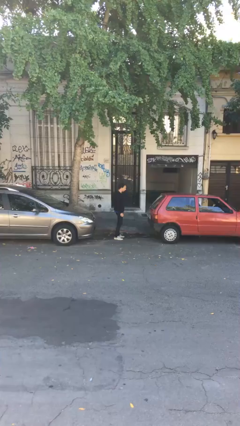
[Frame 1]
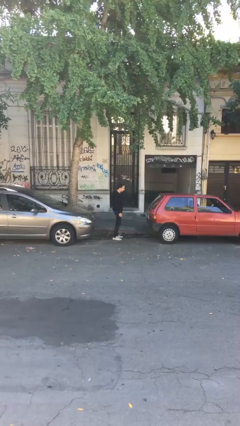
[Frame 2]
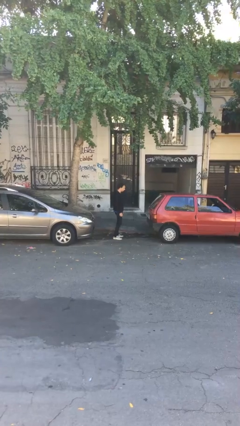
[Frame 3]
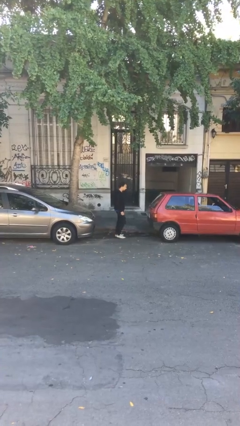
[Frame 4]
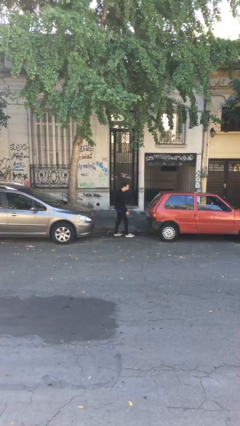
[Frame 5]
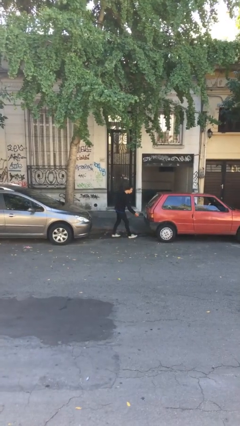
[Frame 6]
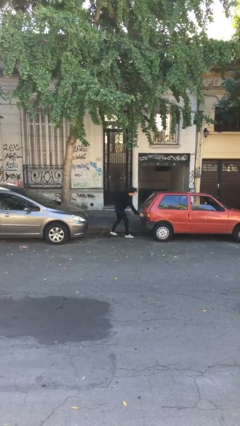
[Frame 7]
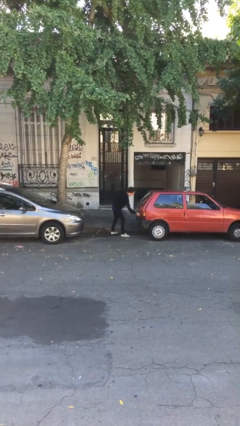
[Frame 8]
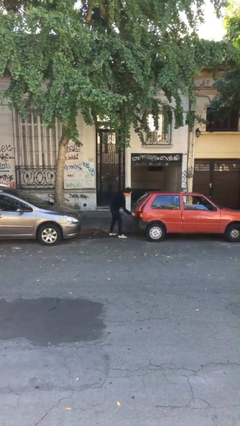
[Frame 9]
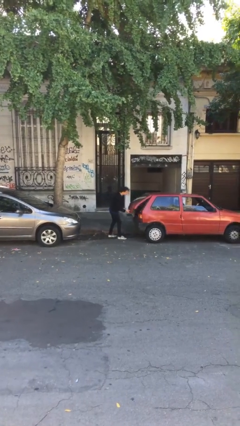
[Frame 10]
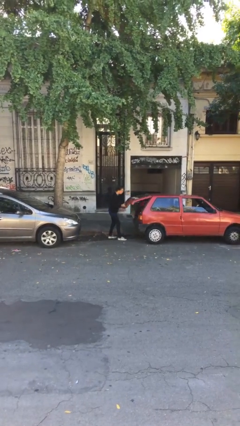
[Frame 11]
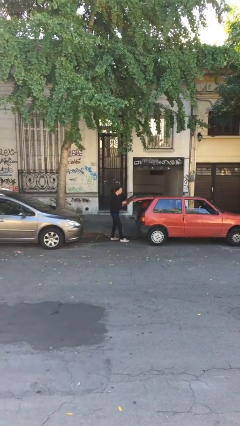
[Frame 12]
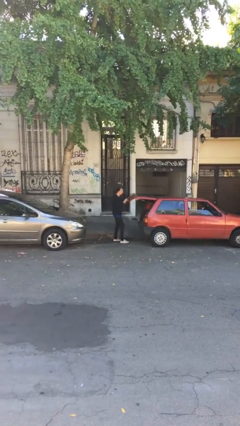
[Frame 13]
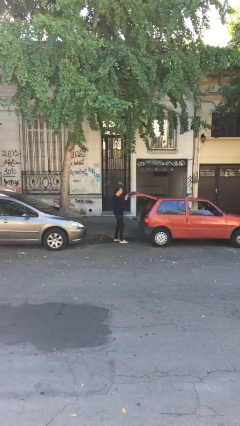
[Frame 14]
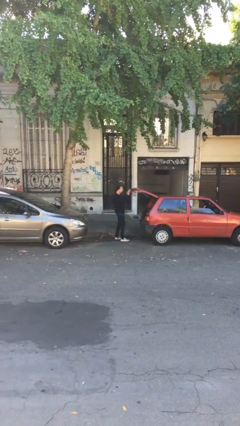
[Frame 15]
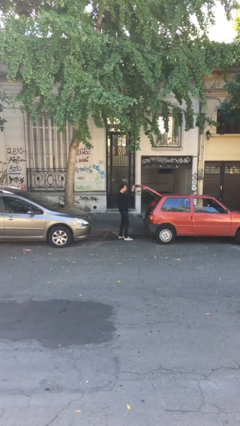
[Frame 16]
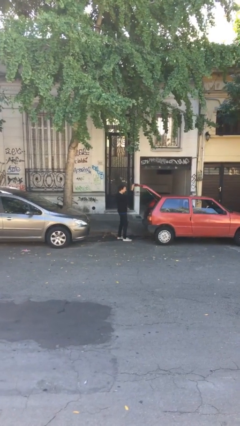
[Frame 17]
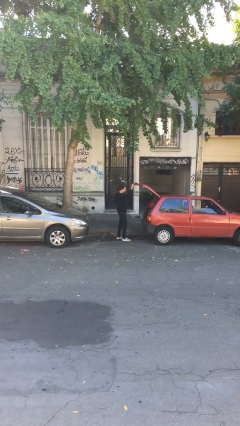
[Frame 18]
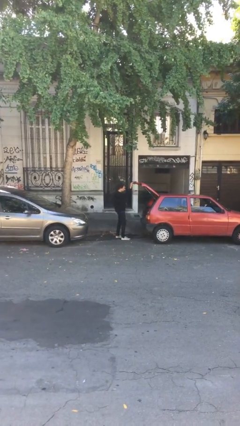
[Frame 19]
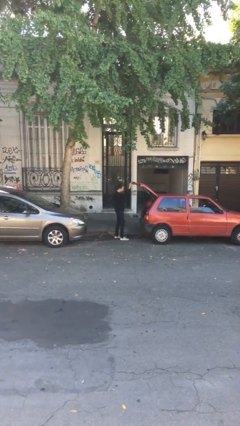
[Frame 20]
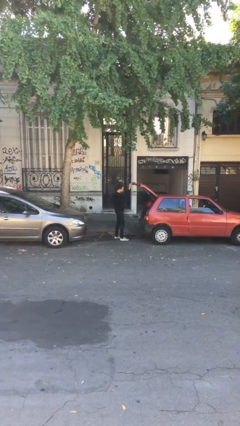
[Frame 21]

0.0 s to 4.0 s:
person opens car trunk

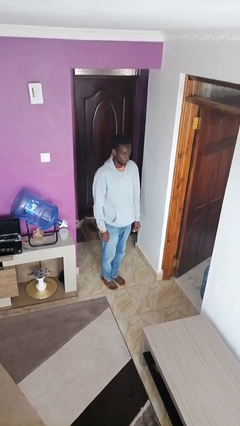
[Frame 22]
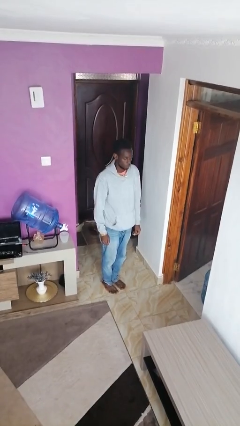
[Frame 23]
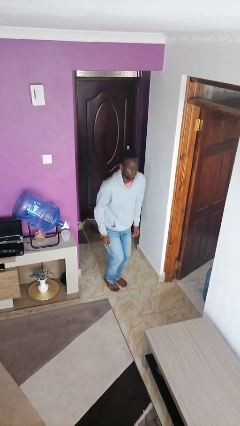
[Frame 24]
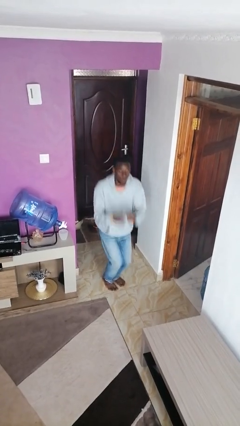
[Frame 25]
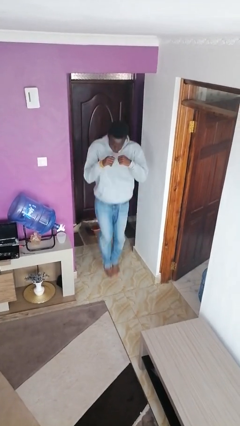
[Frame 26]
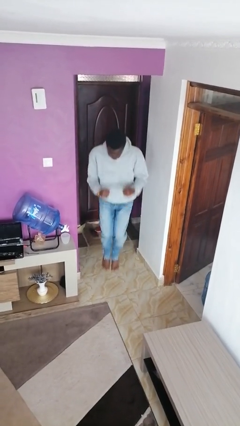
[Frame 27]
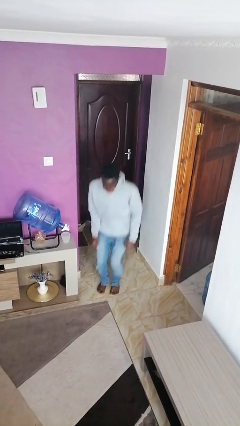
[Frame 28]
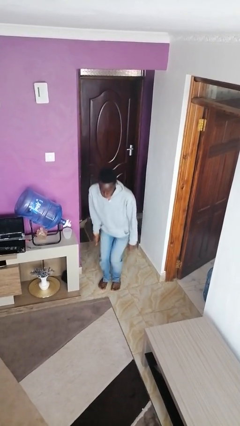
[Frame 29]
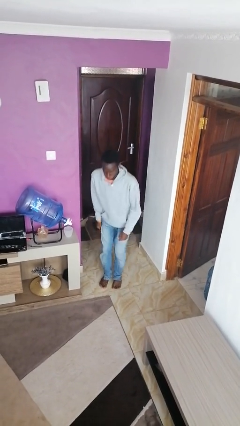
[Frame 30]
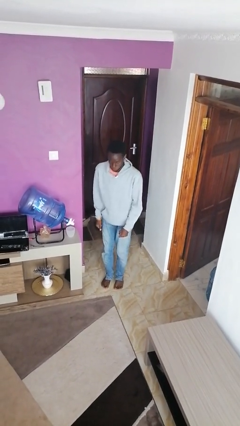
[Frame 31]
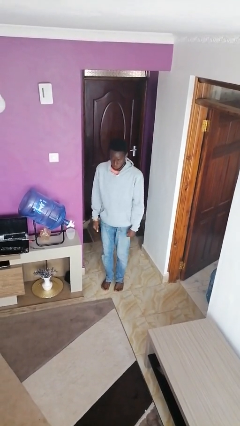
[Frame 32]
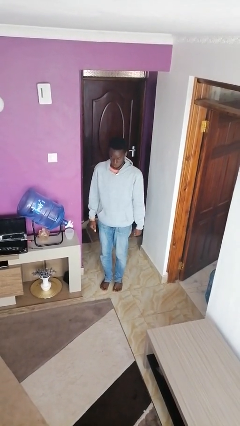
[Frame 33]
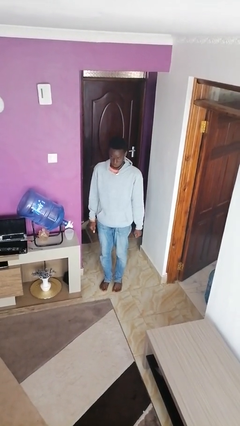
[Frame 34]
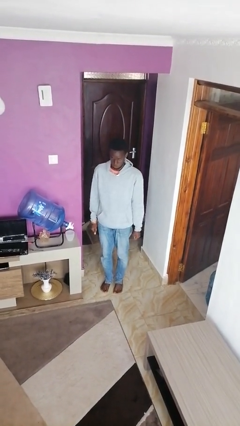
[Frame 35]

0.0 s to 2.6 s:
person jumps

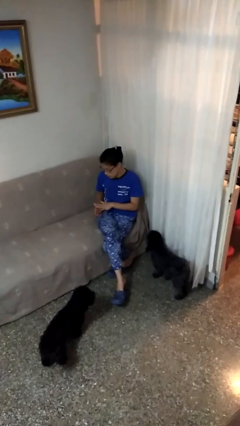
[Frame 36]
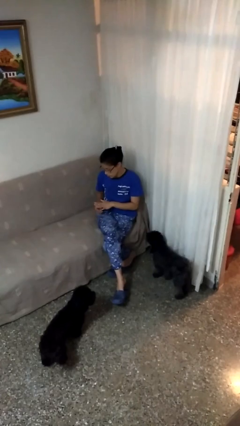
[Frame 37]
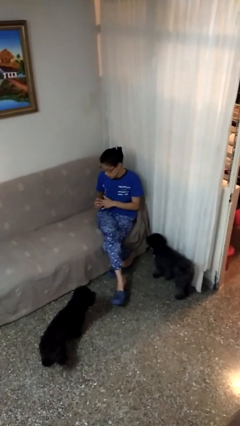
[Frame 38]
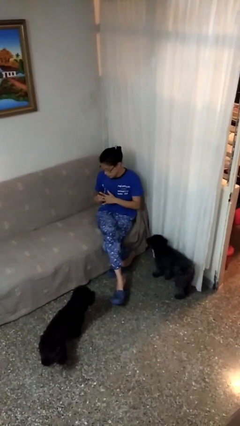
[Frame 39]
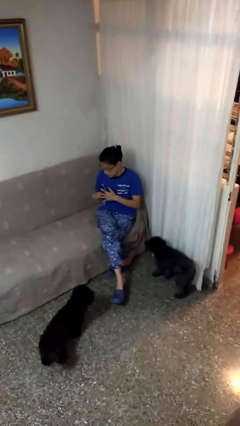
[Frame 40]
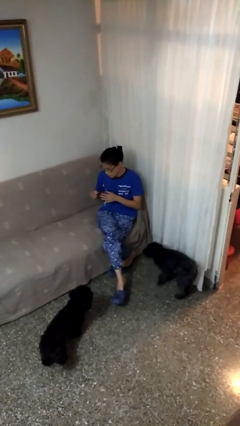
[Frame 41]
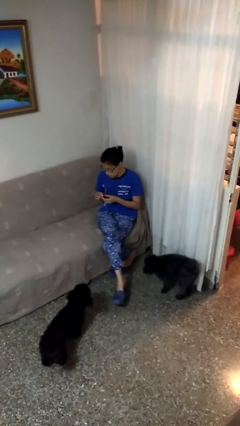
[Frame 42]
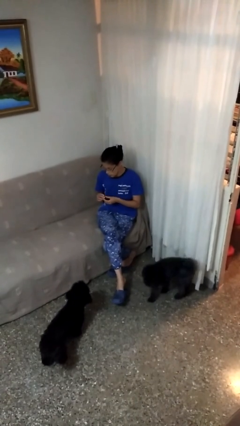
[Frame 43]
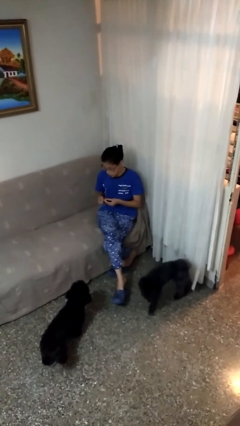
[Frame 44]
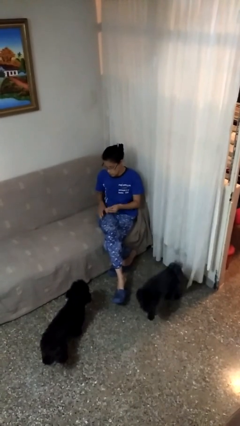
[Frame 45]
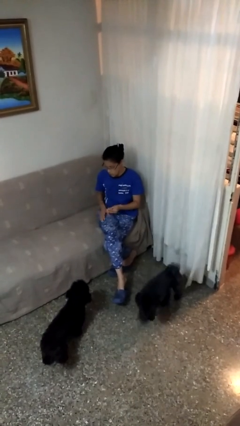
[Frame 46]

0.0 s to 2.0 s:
person takes off ring

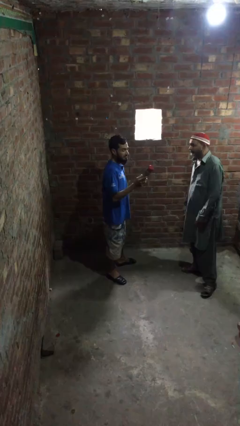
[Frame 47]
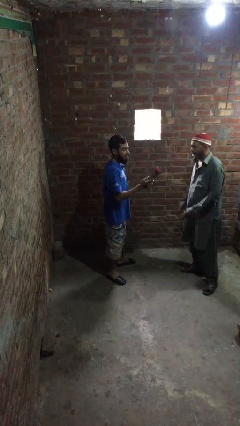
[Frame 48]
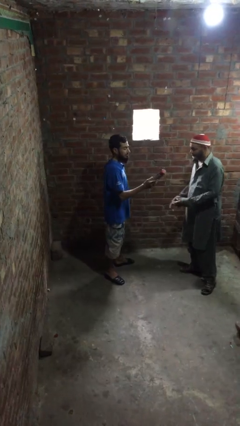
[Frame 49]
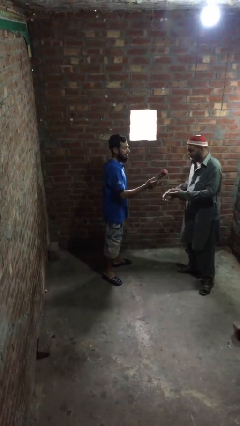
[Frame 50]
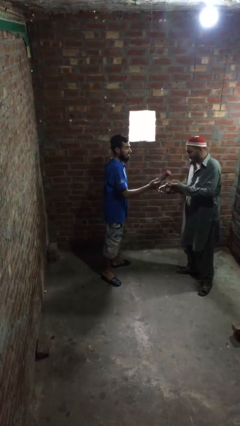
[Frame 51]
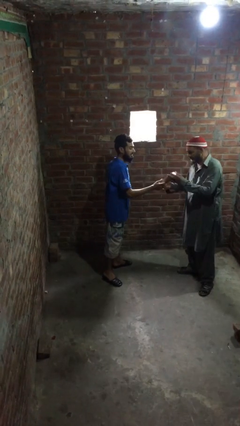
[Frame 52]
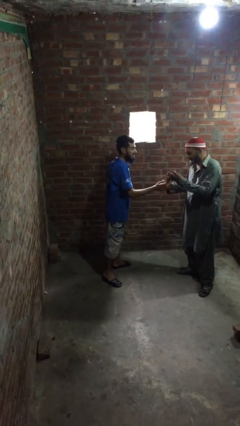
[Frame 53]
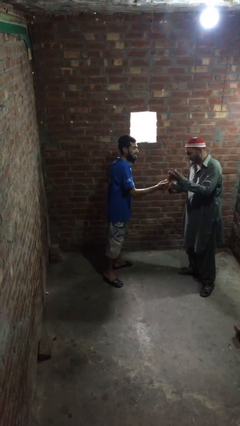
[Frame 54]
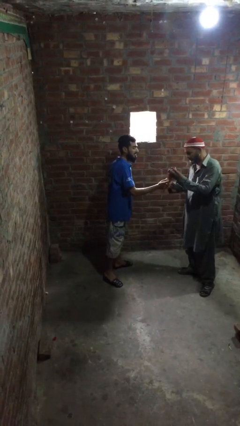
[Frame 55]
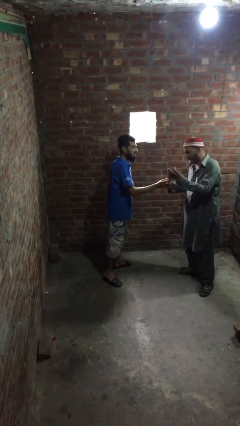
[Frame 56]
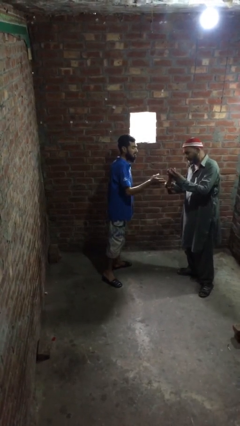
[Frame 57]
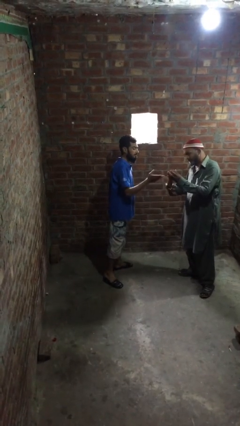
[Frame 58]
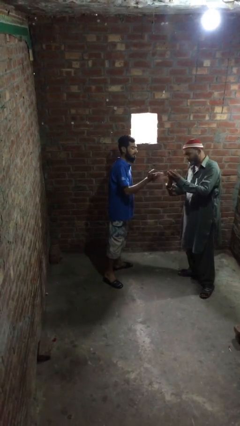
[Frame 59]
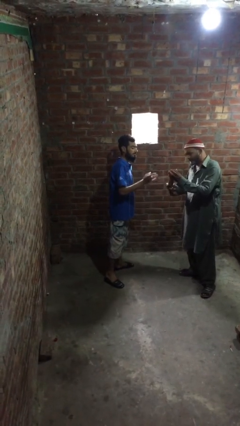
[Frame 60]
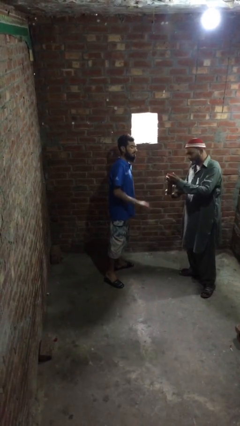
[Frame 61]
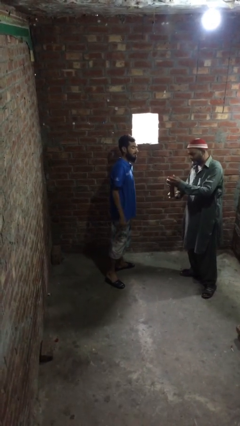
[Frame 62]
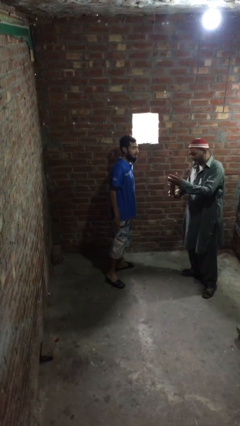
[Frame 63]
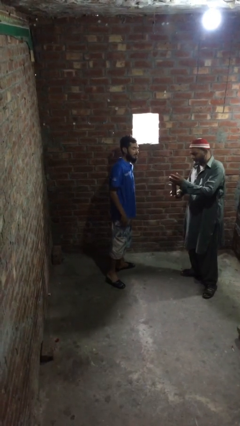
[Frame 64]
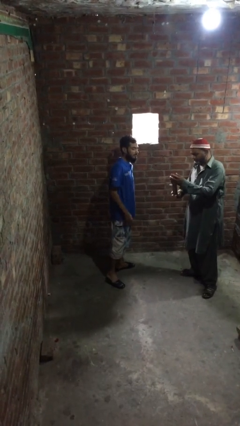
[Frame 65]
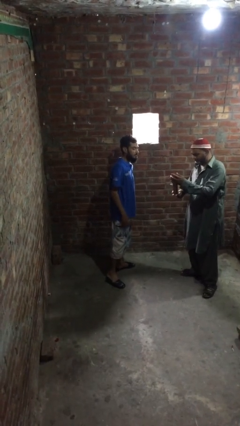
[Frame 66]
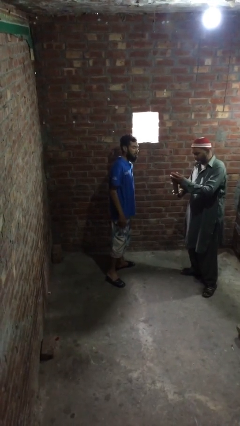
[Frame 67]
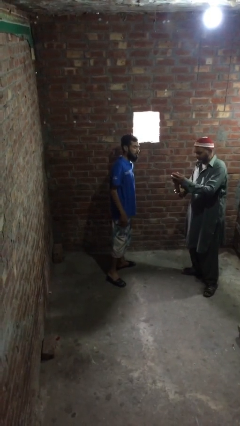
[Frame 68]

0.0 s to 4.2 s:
person transfers object to person

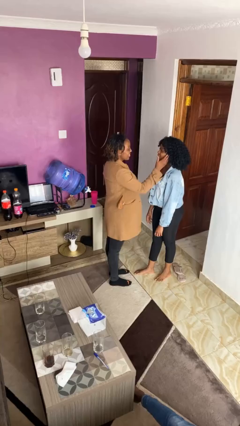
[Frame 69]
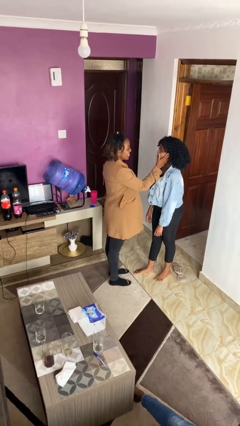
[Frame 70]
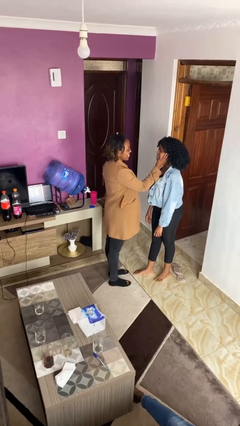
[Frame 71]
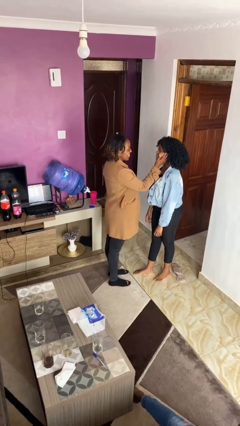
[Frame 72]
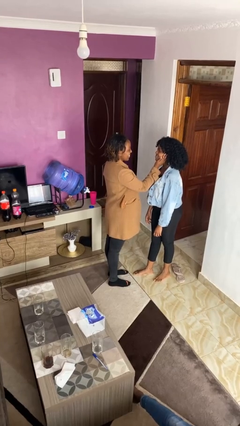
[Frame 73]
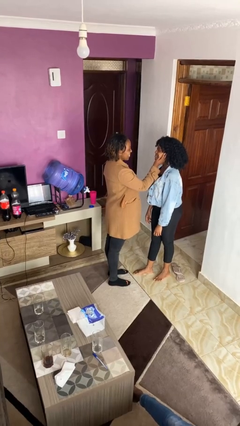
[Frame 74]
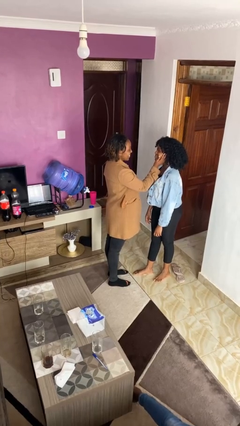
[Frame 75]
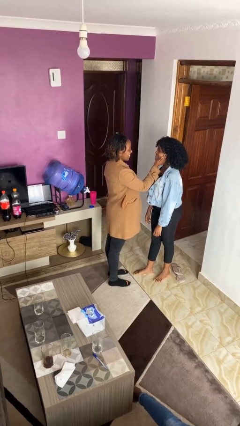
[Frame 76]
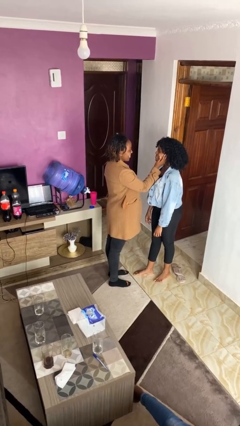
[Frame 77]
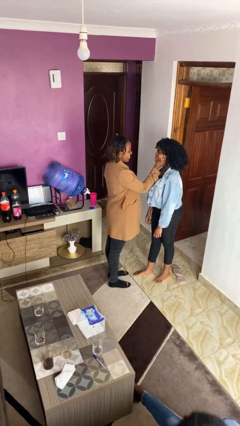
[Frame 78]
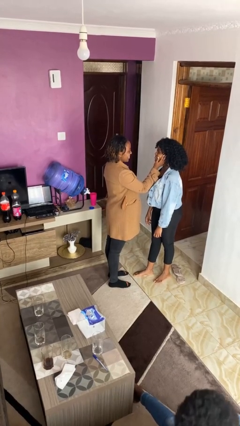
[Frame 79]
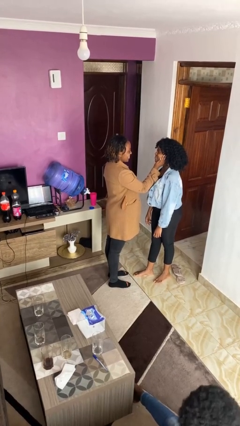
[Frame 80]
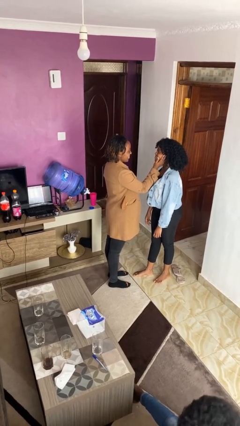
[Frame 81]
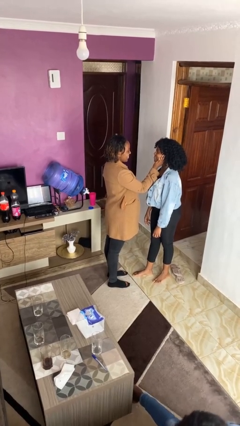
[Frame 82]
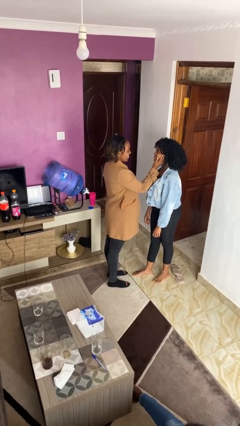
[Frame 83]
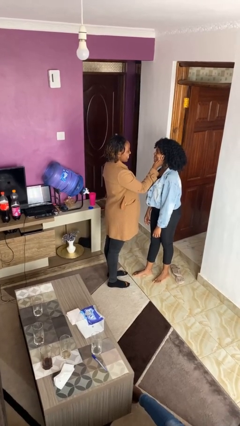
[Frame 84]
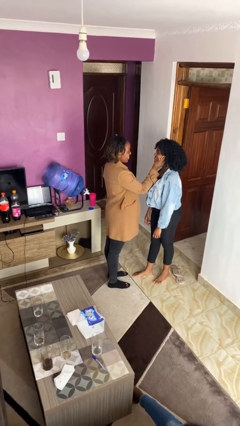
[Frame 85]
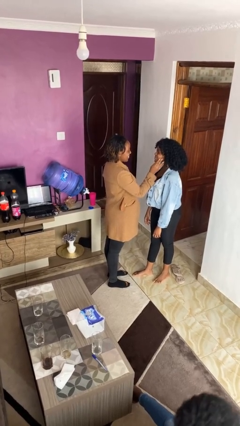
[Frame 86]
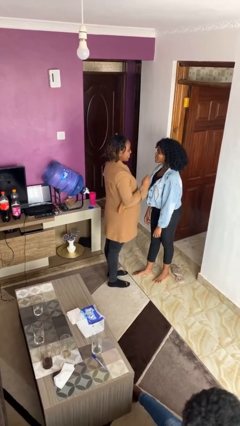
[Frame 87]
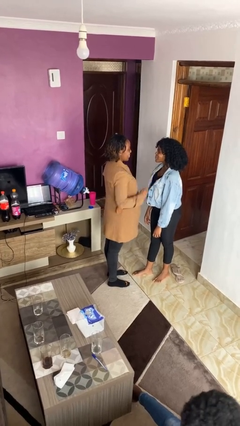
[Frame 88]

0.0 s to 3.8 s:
person touches face of person

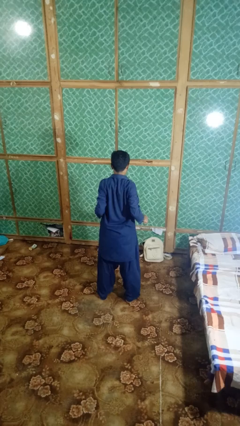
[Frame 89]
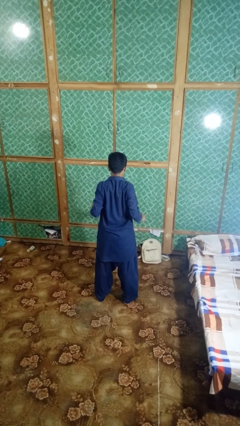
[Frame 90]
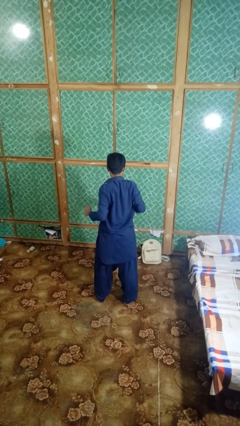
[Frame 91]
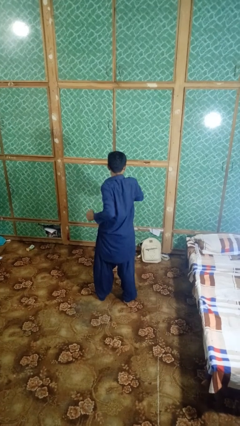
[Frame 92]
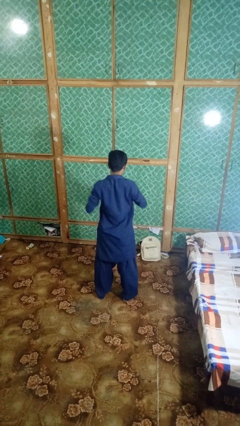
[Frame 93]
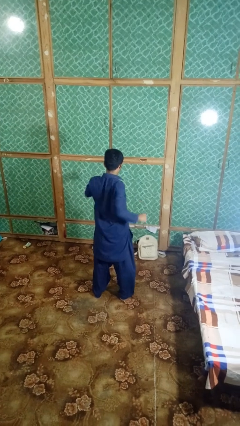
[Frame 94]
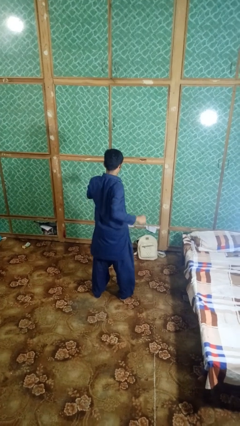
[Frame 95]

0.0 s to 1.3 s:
person stretches arms to side
